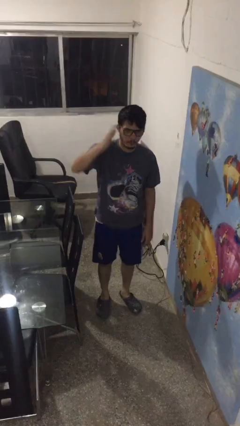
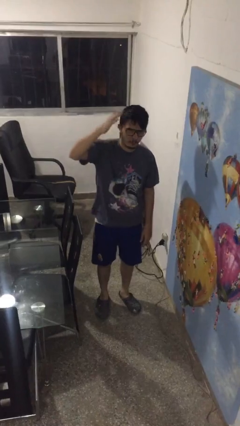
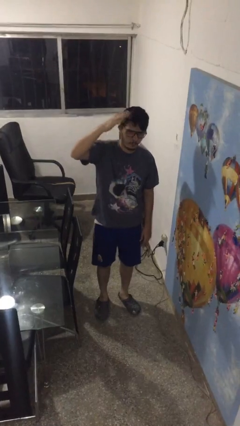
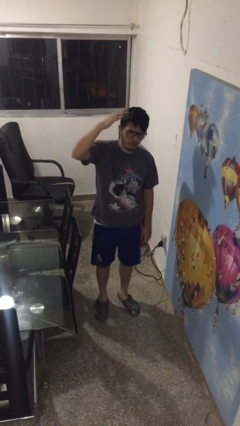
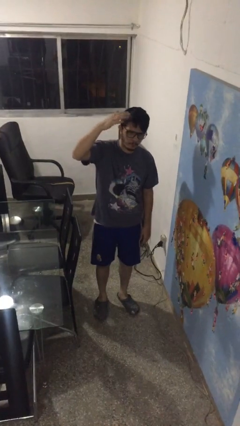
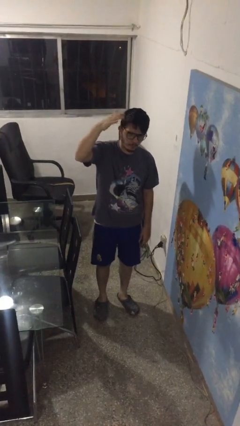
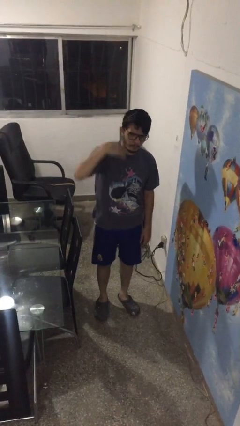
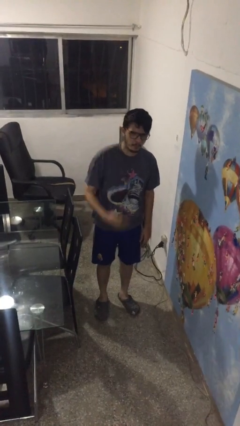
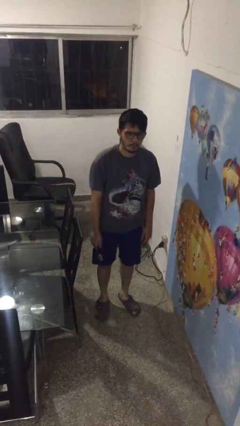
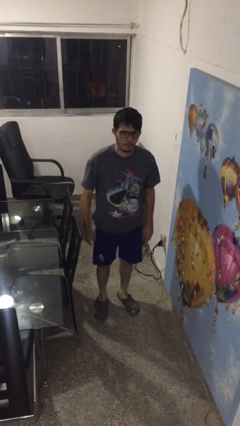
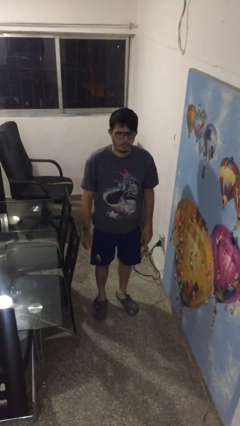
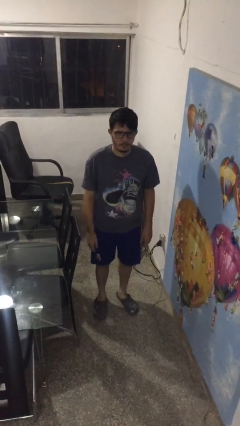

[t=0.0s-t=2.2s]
person gestures come here

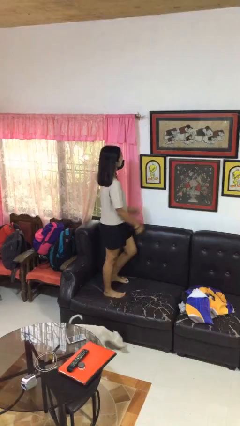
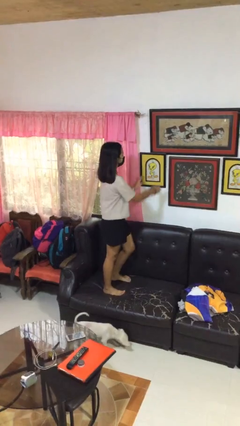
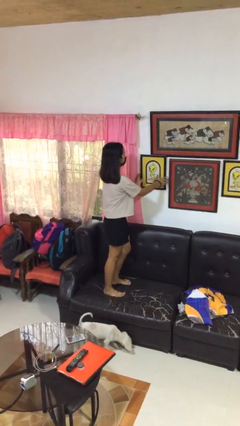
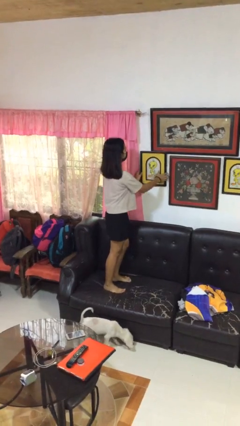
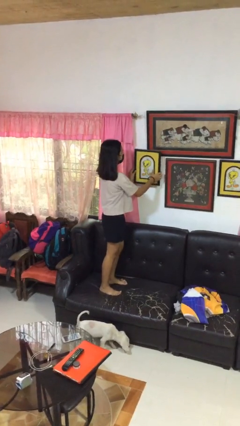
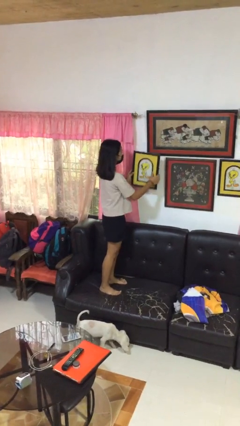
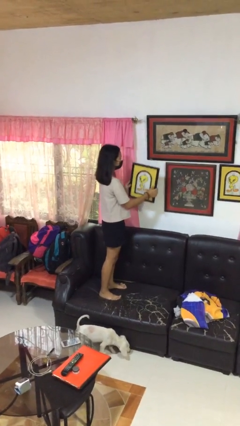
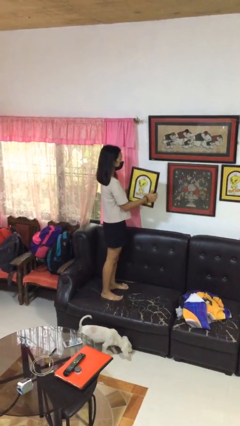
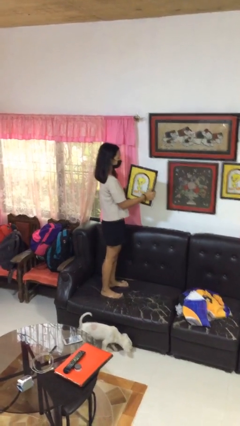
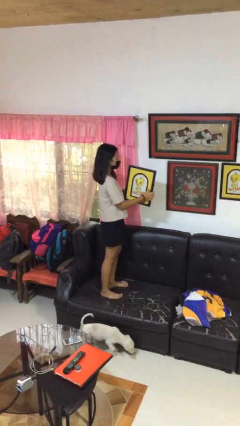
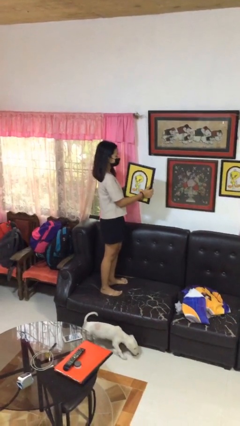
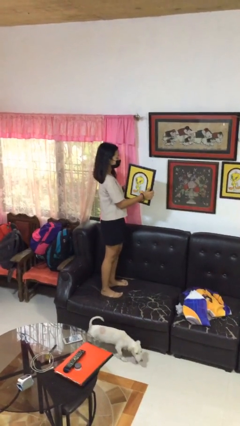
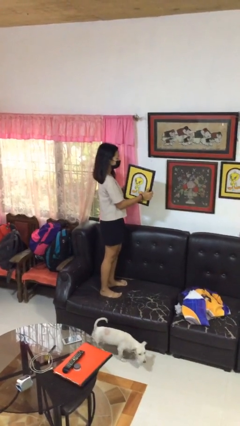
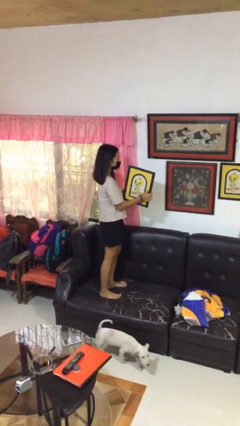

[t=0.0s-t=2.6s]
person takes down picture frame

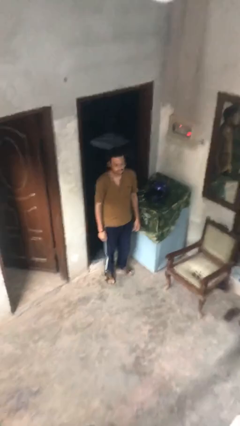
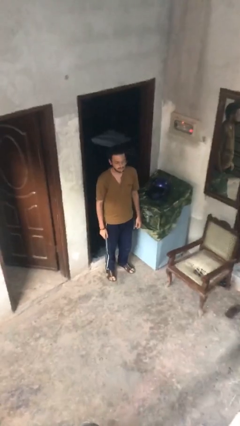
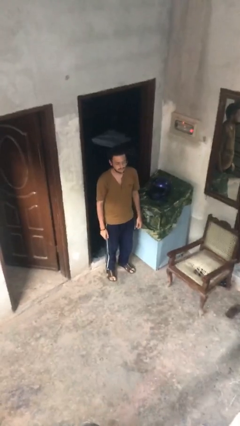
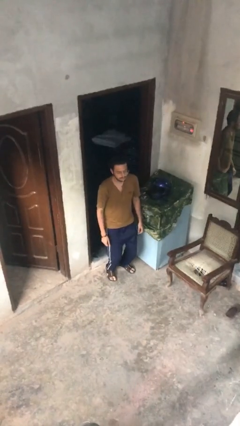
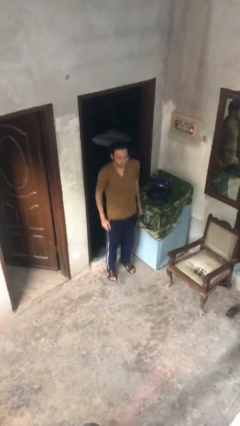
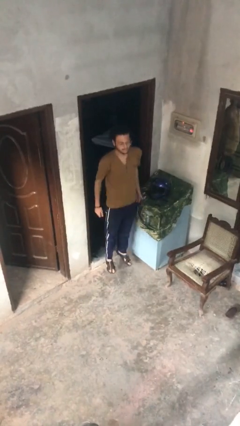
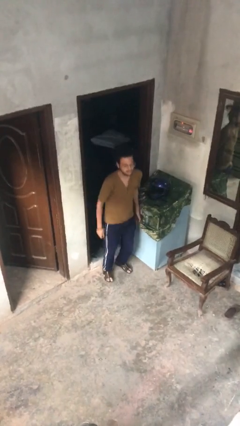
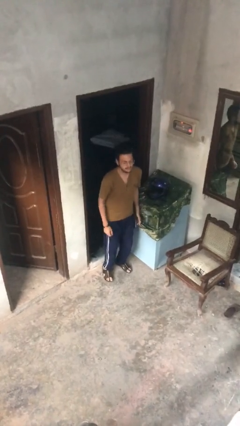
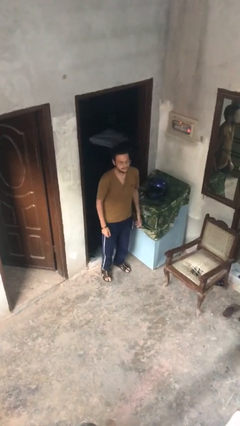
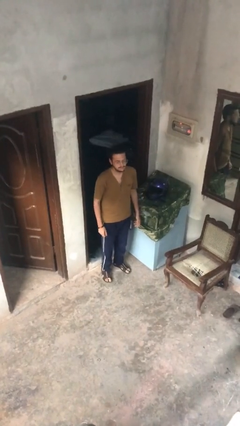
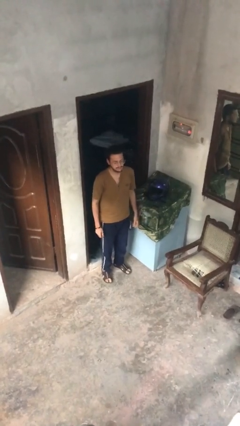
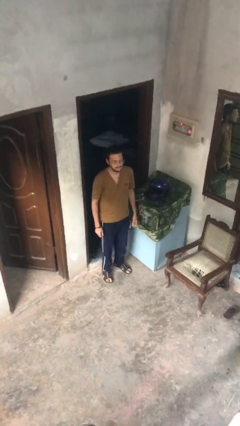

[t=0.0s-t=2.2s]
person jumps

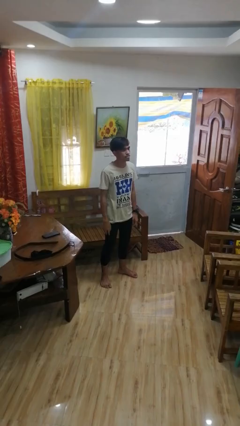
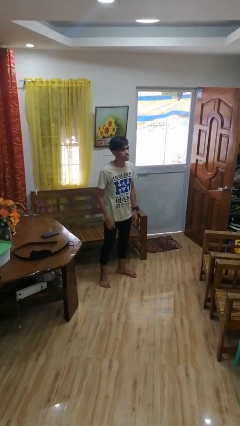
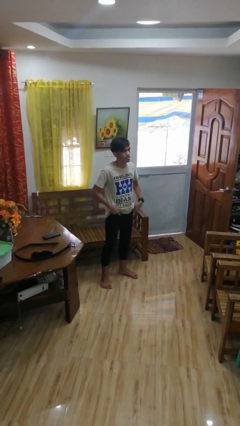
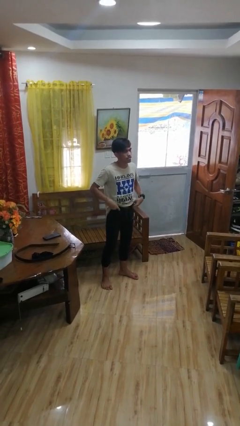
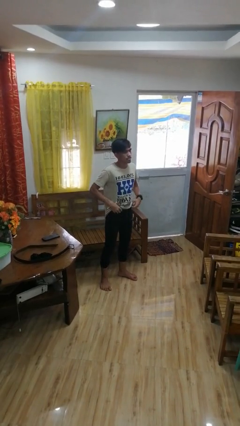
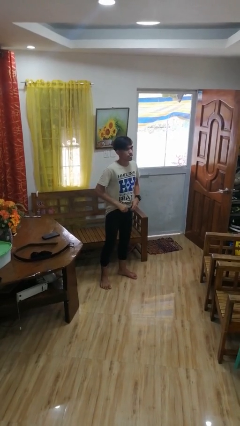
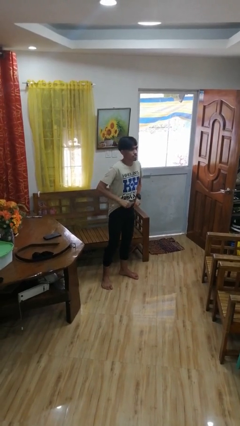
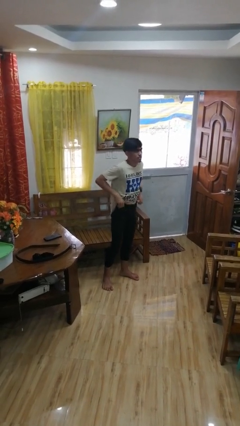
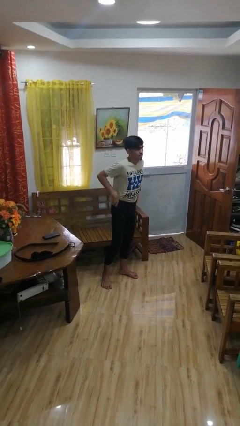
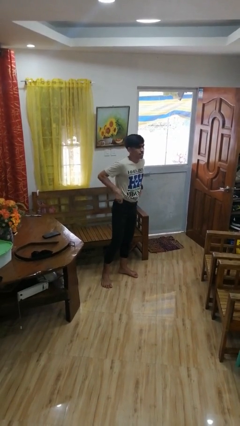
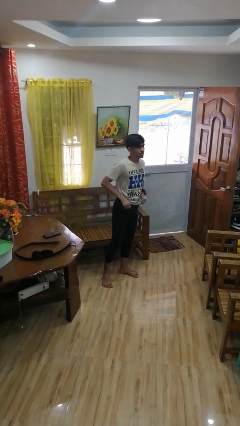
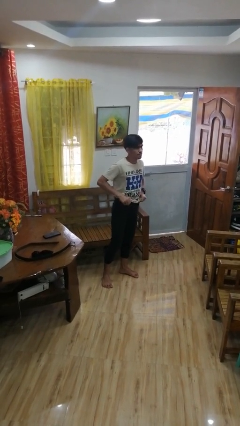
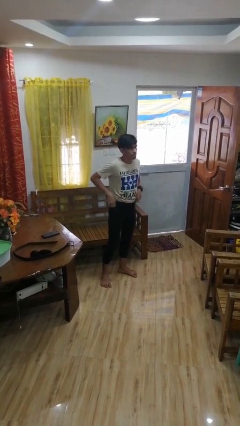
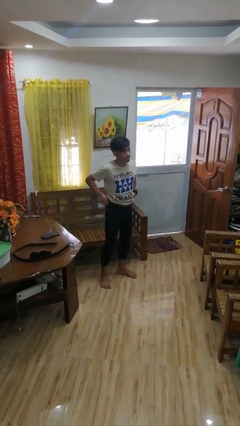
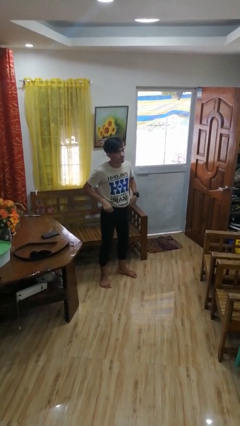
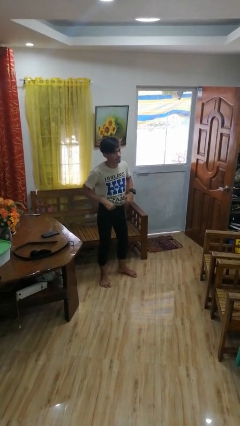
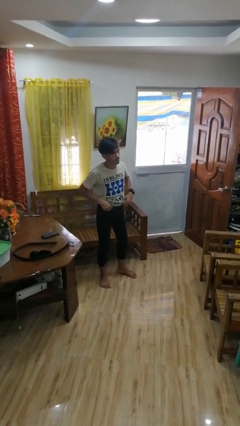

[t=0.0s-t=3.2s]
person hikes up pants

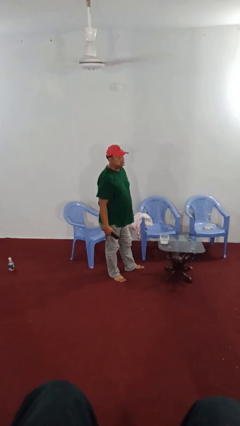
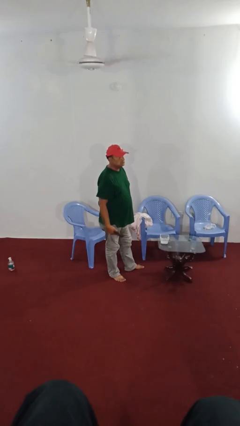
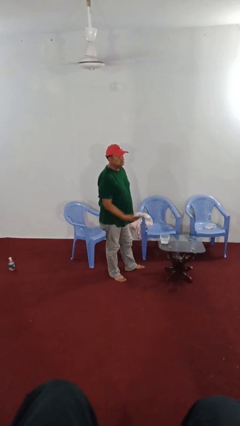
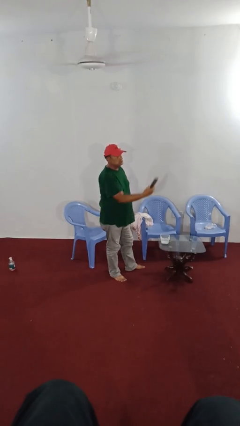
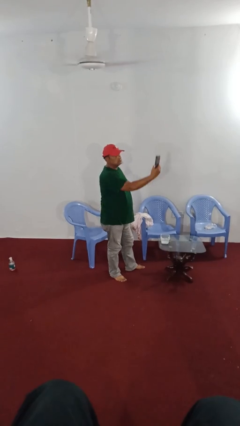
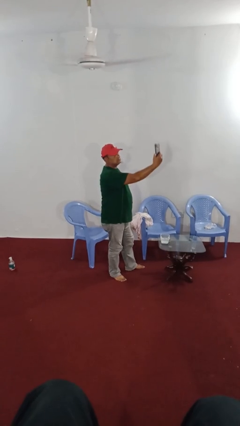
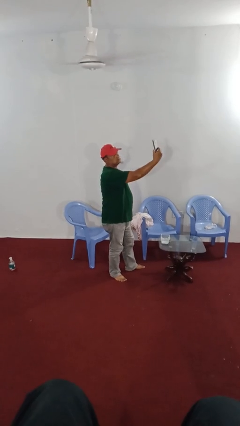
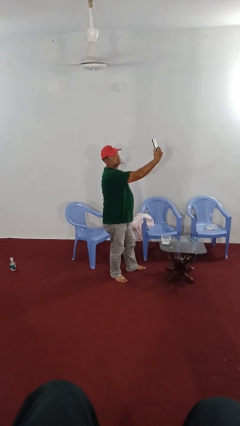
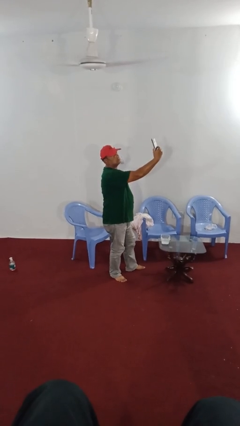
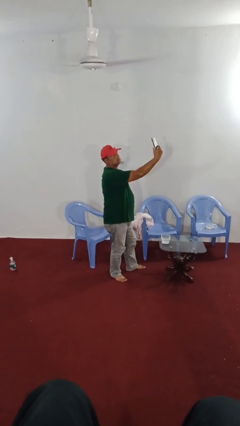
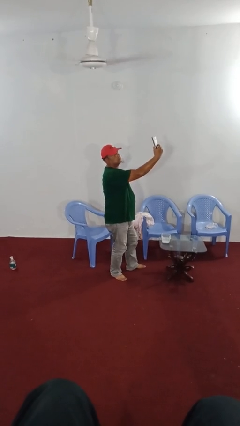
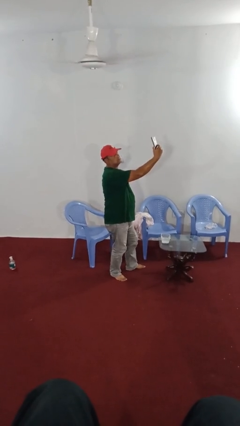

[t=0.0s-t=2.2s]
person takes selfie

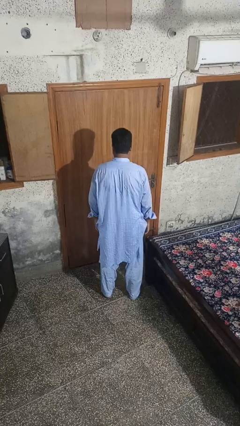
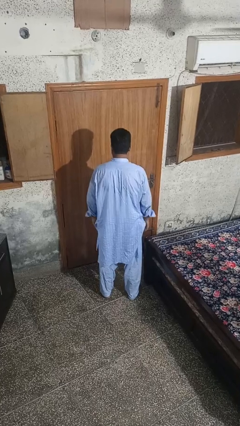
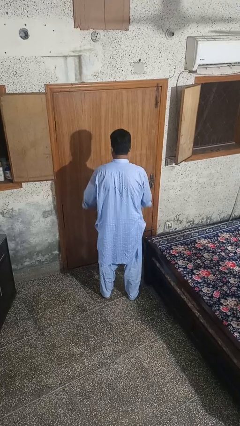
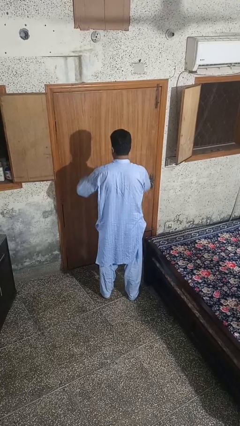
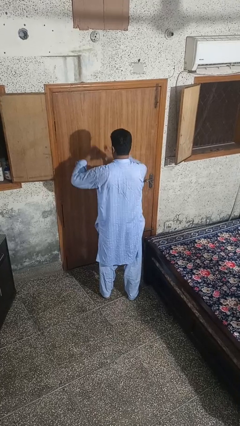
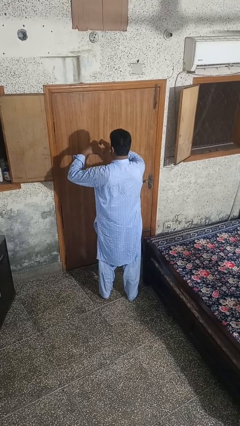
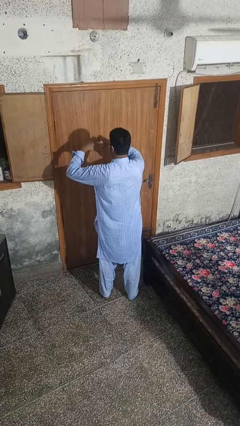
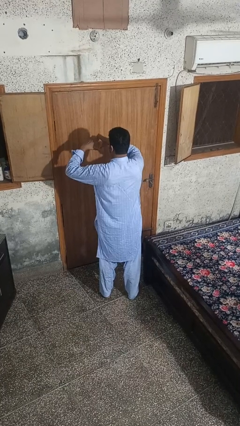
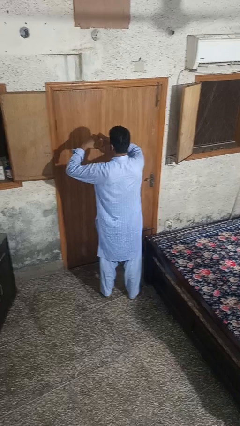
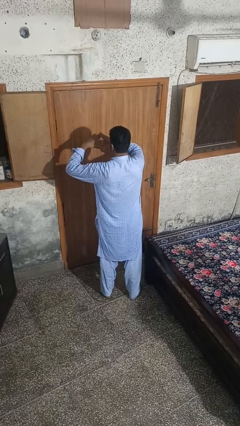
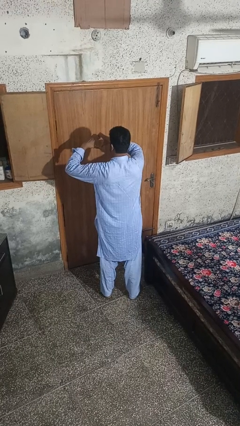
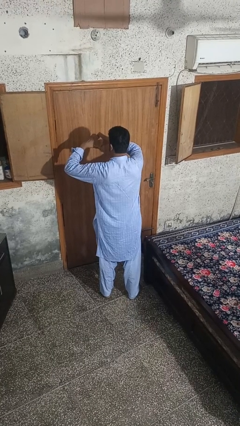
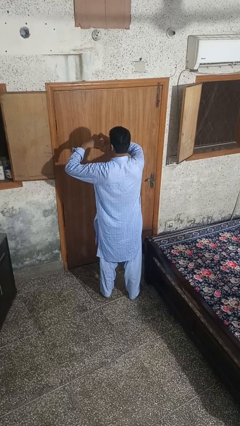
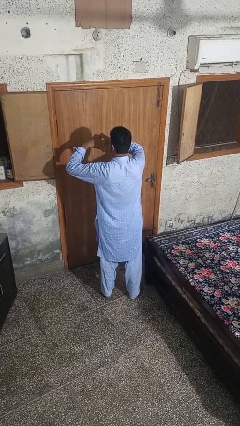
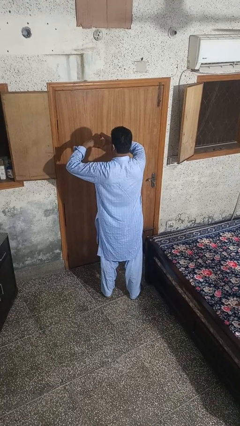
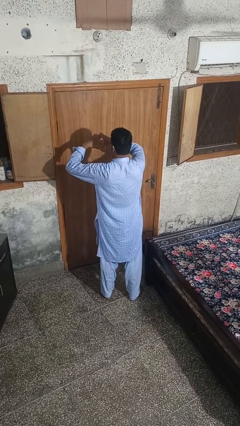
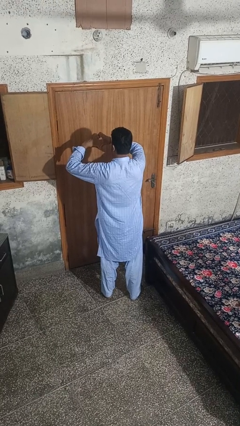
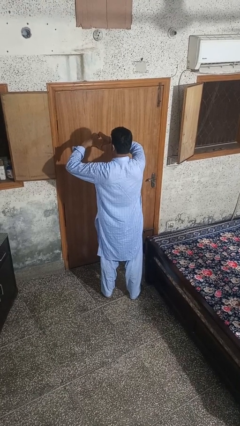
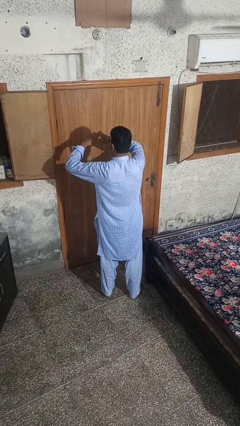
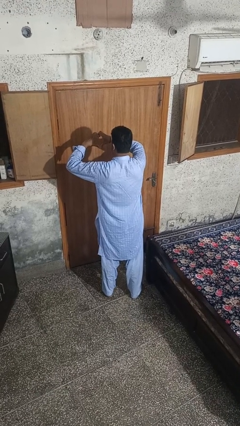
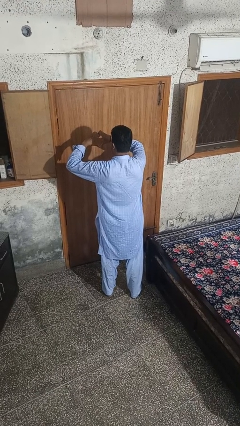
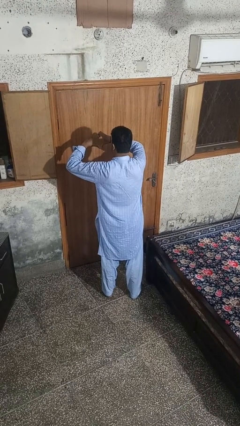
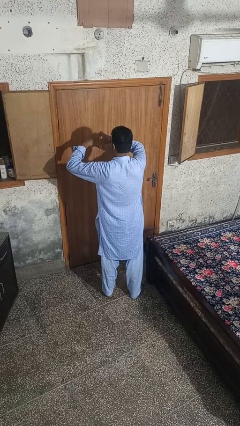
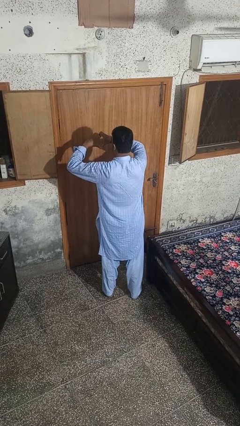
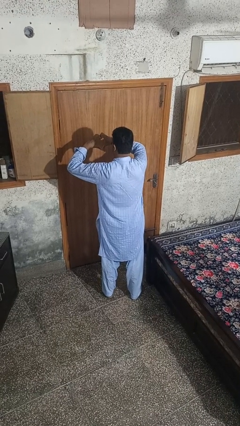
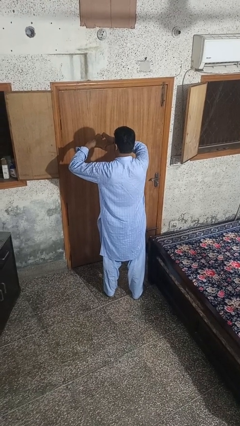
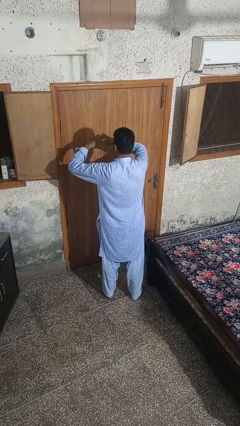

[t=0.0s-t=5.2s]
person gestures heart
